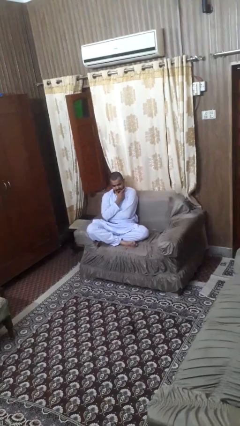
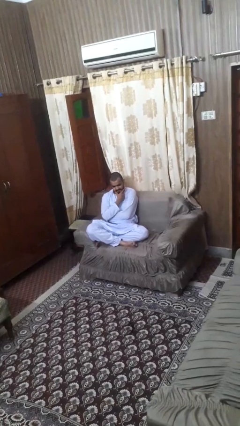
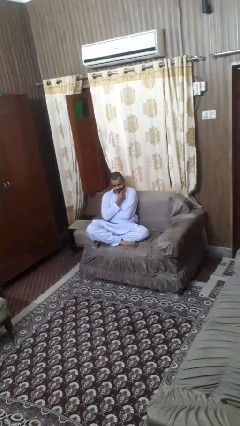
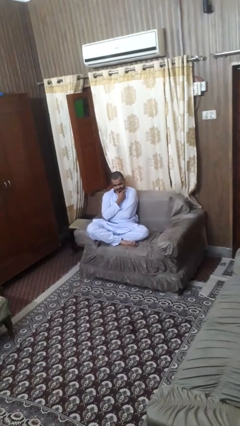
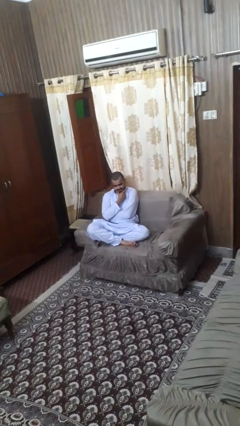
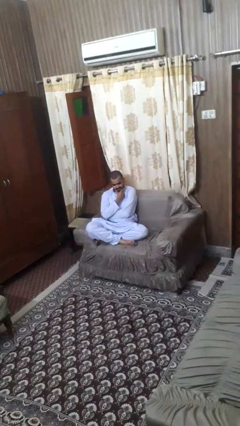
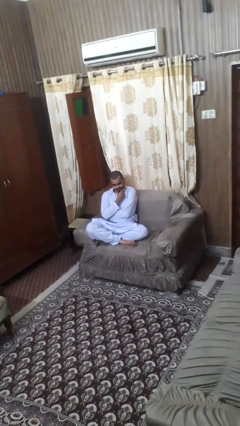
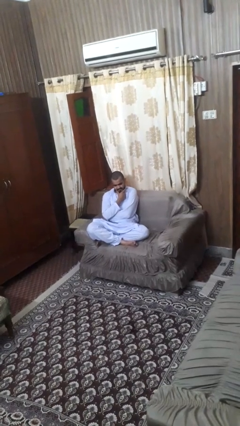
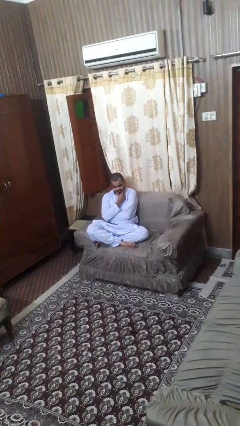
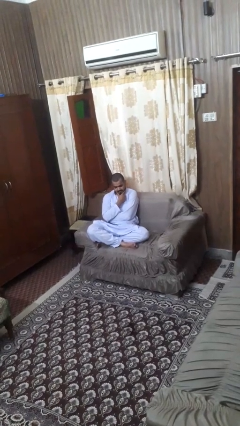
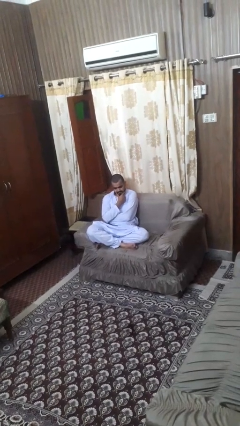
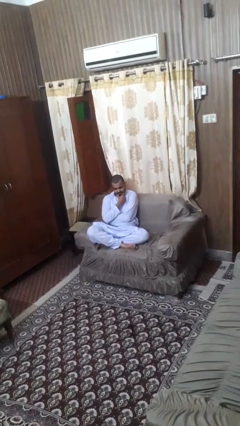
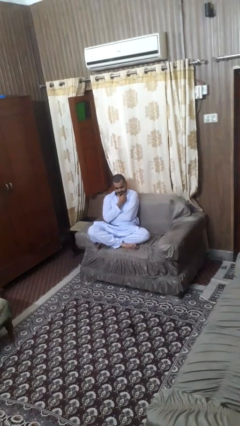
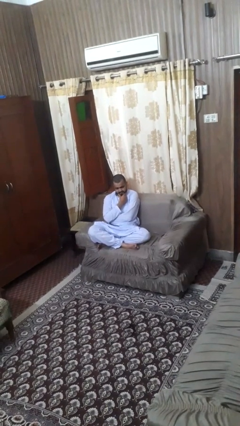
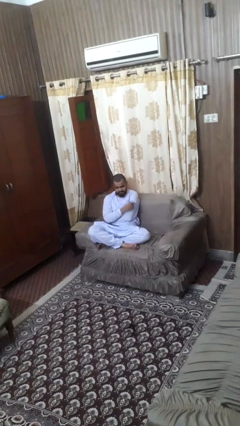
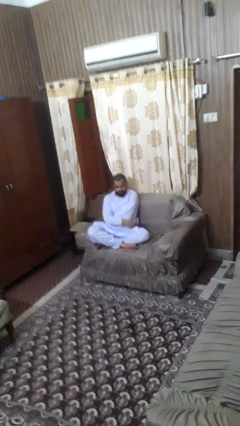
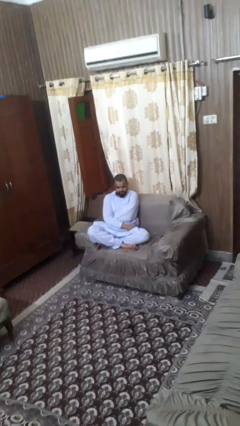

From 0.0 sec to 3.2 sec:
person strokes chin

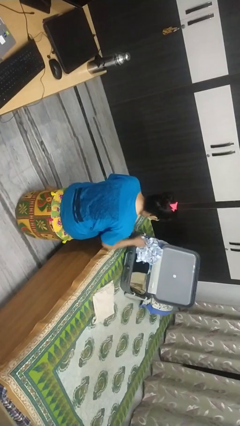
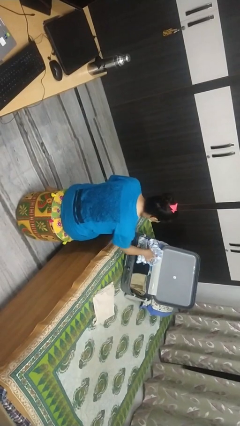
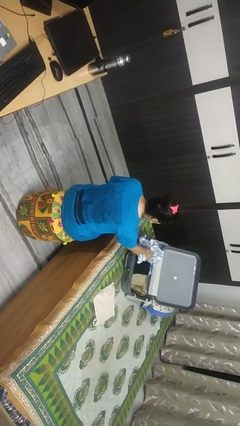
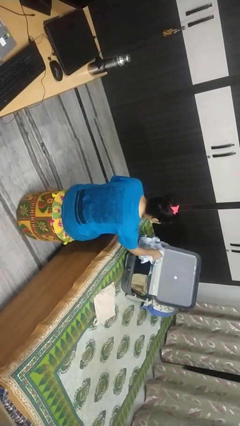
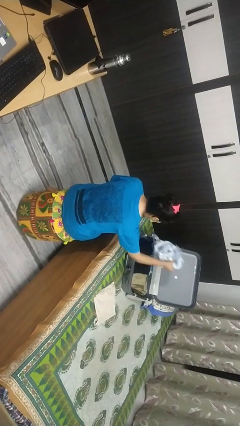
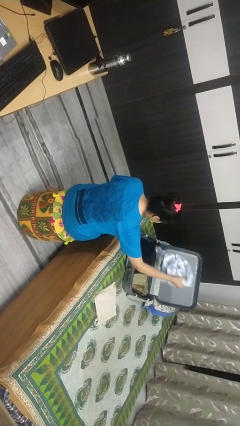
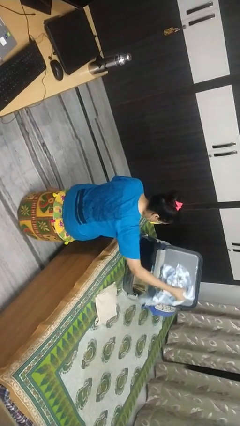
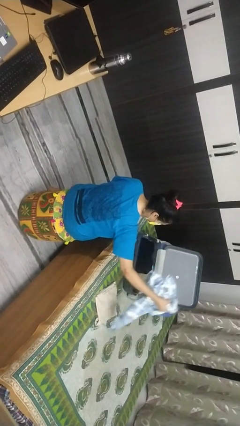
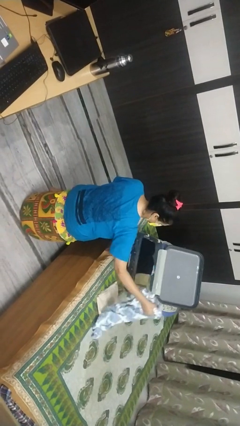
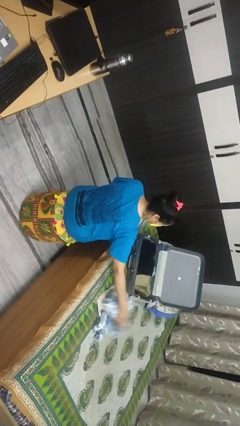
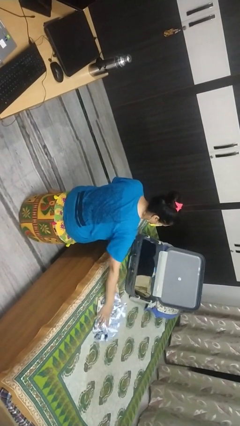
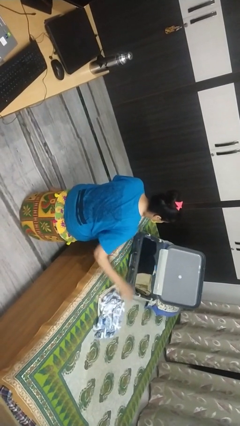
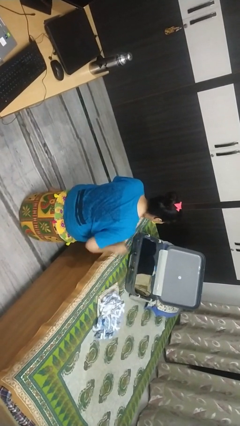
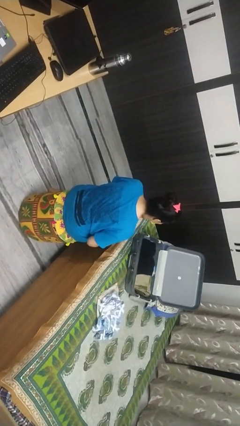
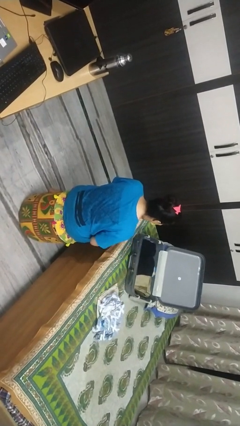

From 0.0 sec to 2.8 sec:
person unloads clothes from suitcase

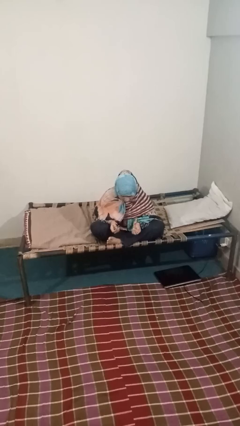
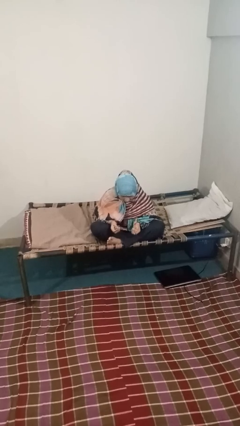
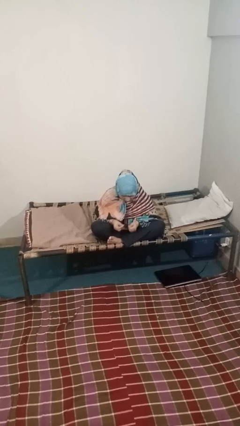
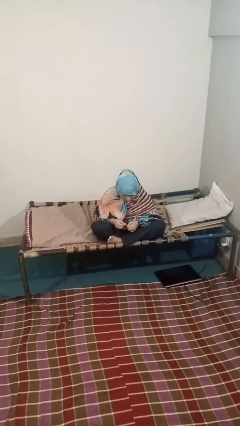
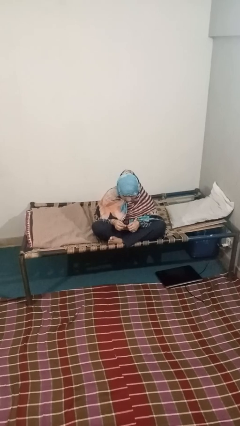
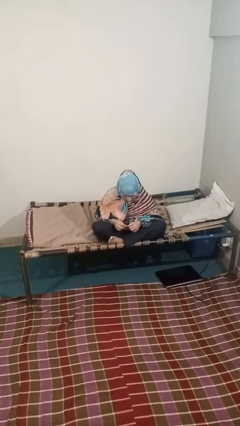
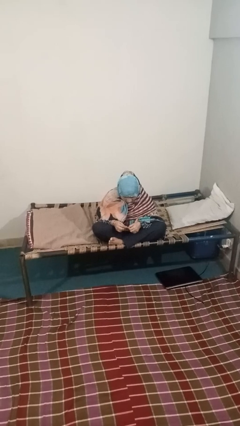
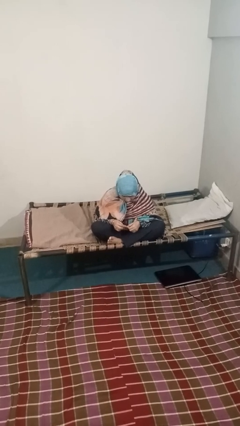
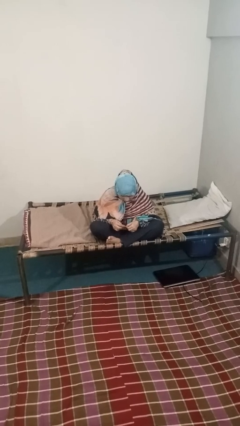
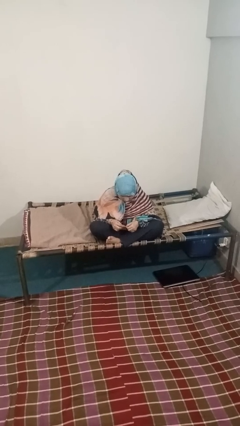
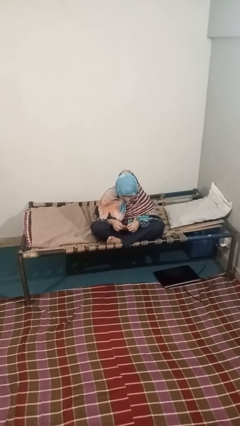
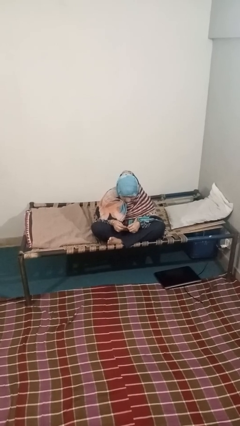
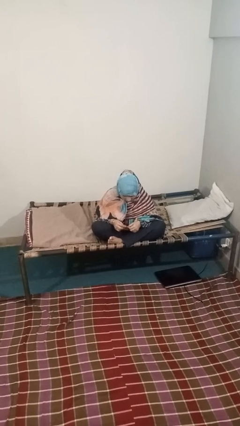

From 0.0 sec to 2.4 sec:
person files fingernails

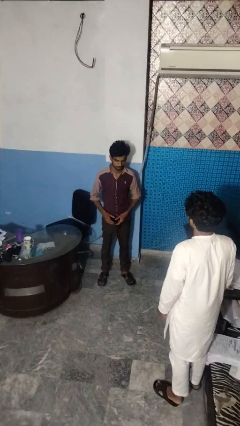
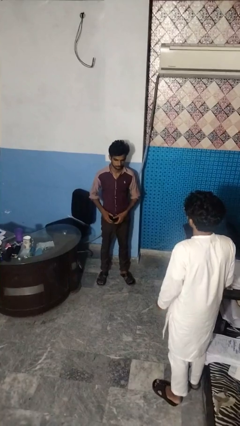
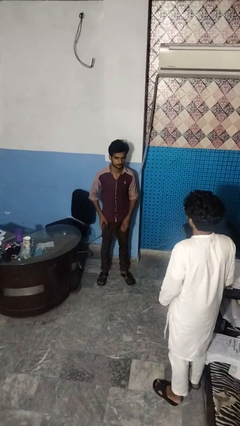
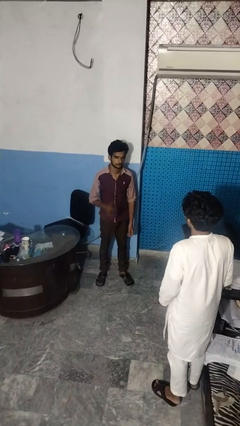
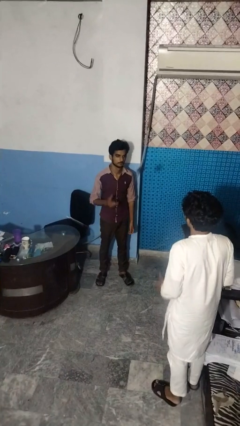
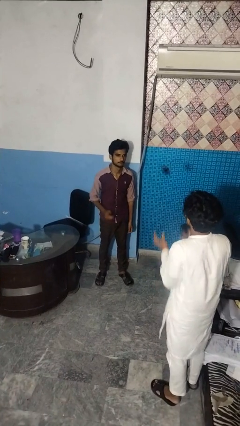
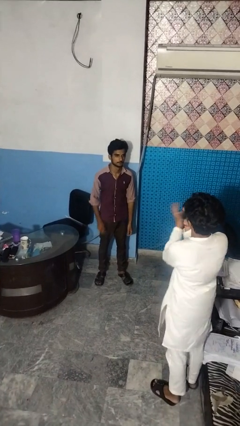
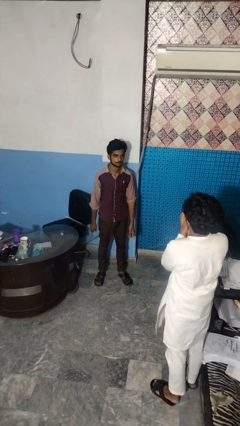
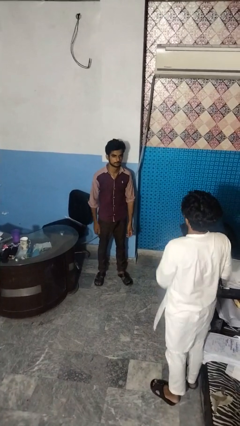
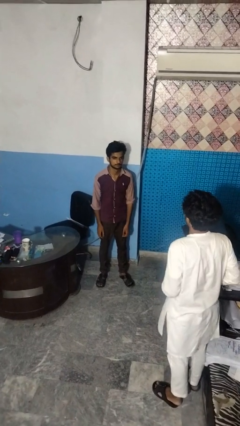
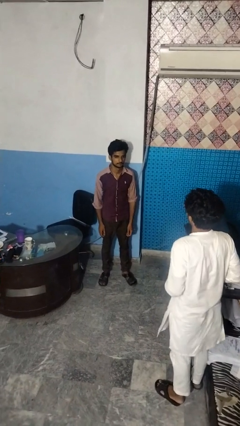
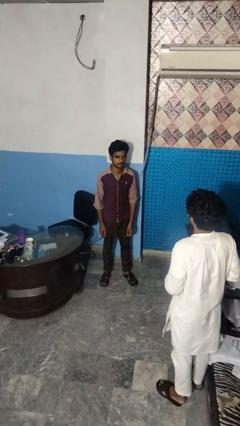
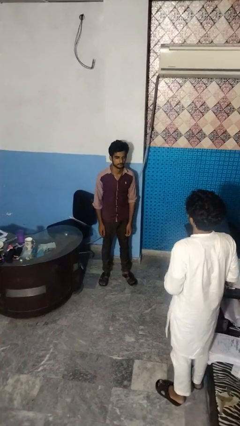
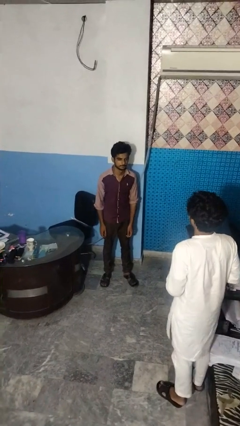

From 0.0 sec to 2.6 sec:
person throws object to person

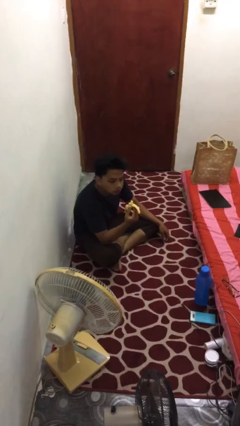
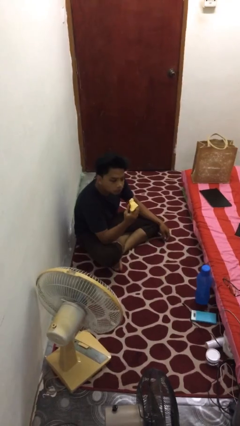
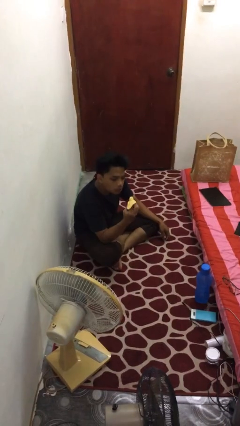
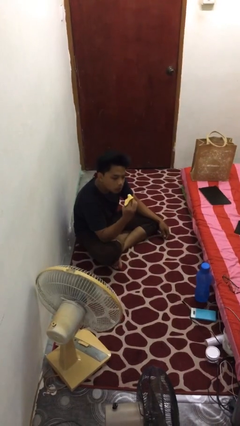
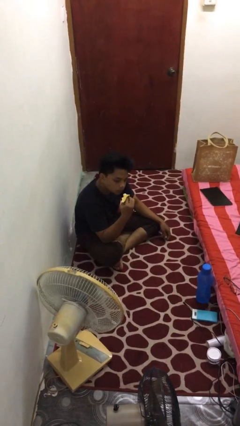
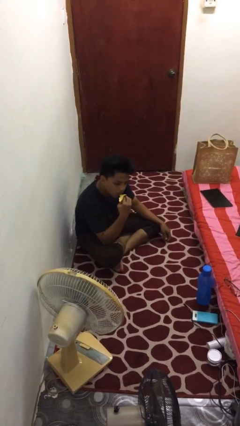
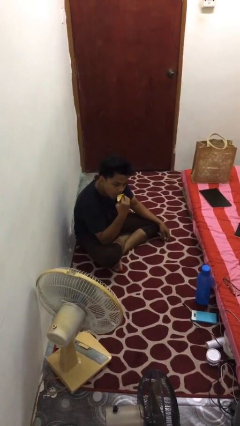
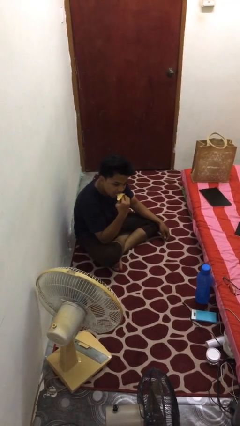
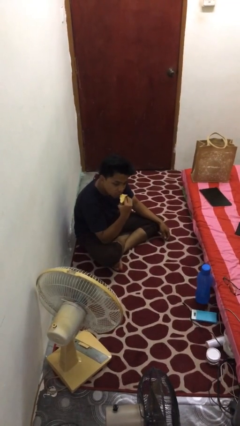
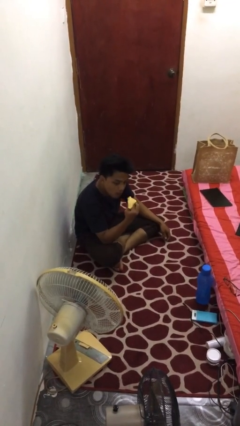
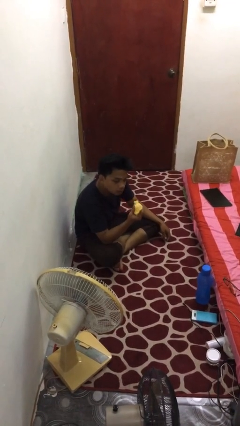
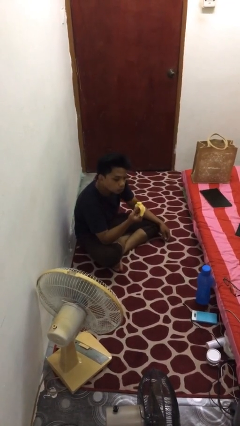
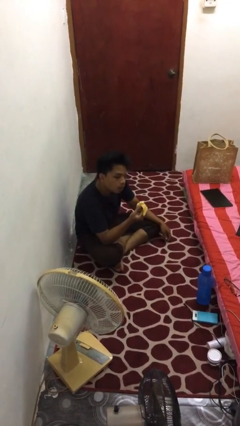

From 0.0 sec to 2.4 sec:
person eats banana

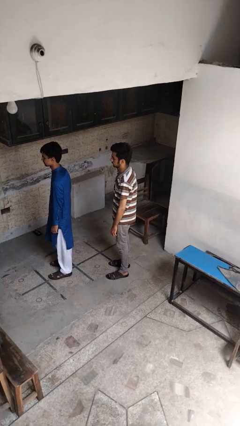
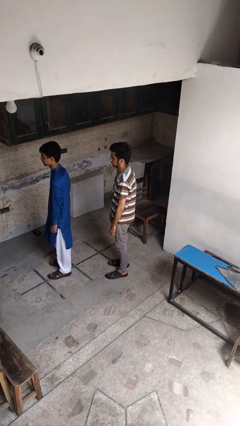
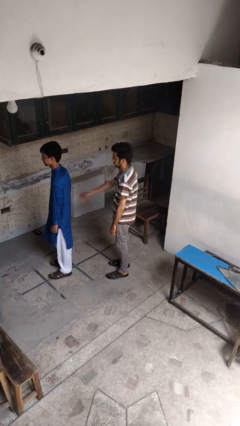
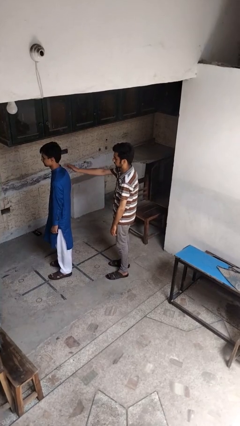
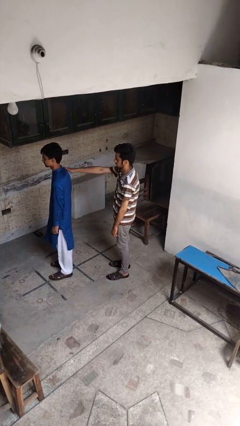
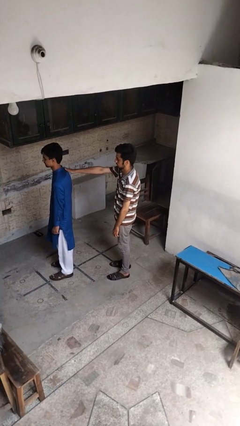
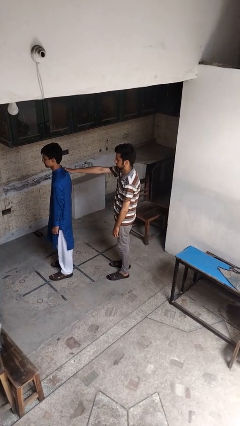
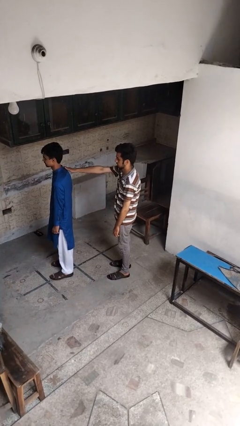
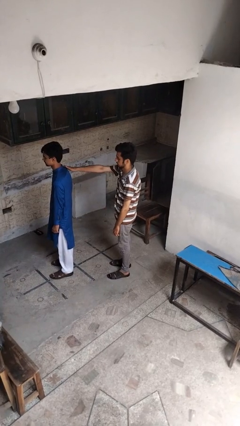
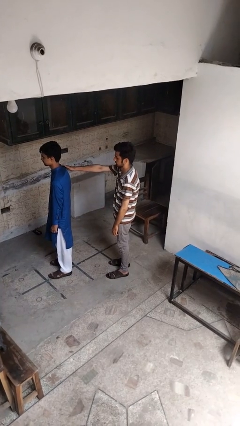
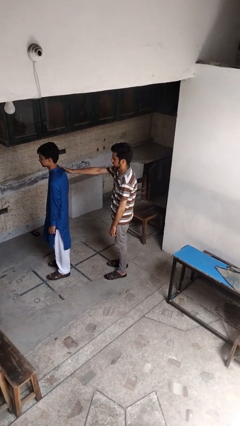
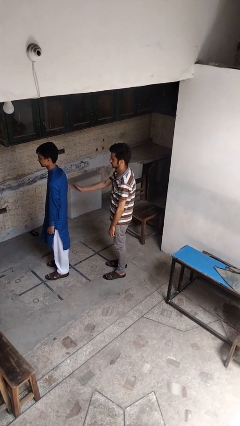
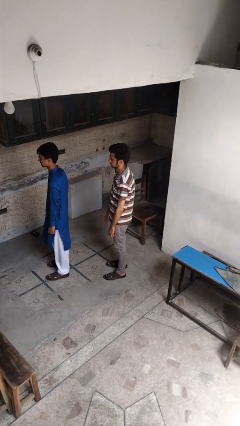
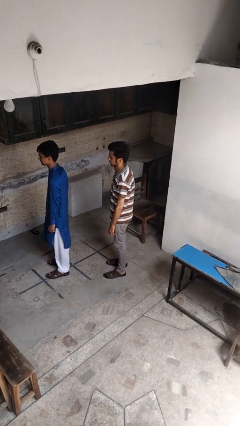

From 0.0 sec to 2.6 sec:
person touches back of person

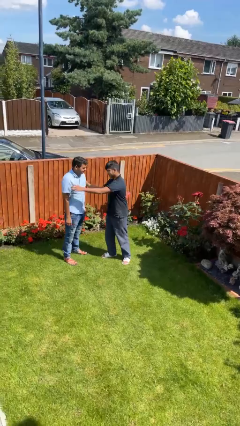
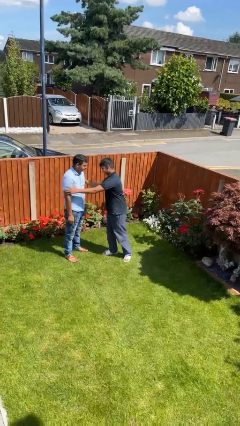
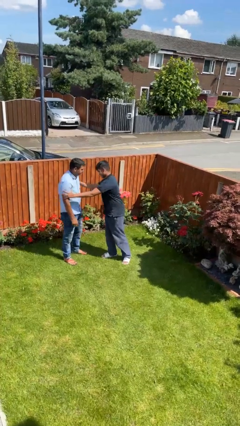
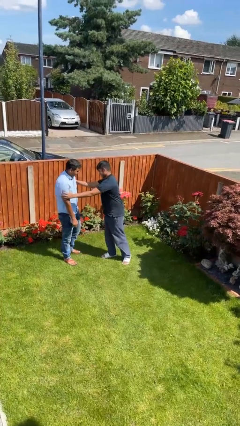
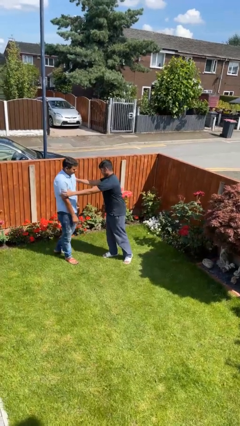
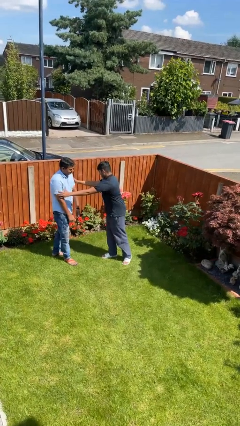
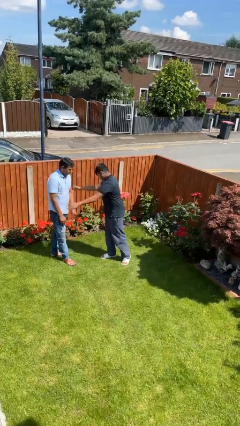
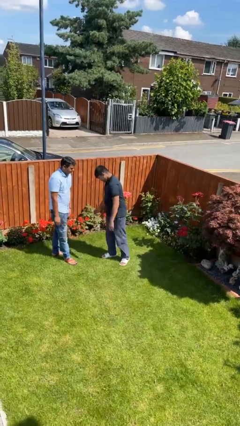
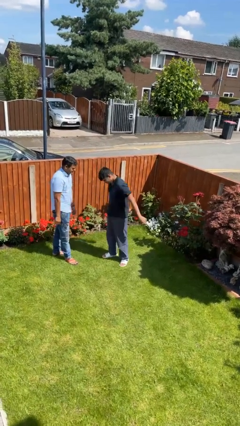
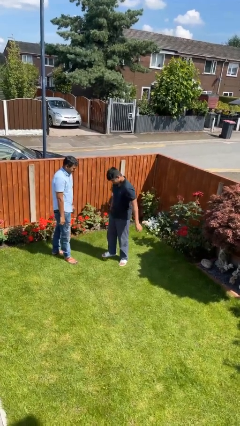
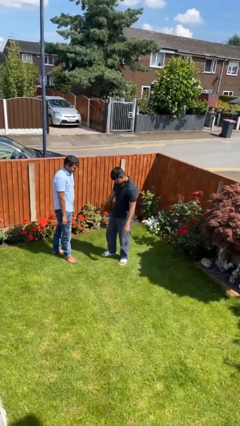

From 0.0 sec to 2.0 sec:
person shoves person
